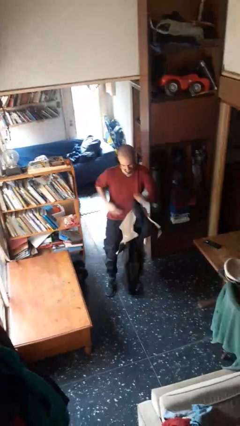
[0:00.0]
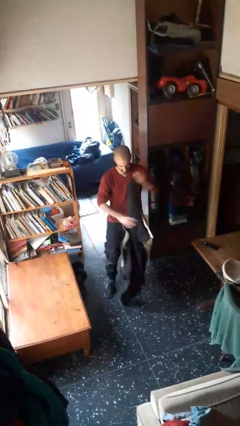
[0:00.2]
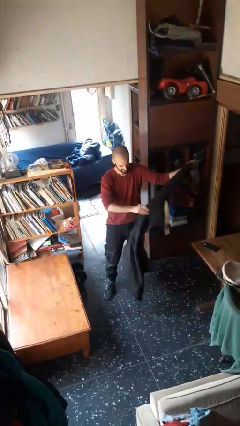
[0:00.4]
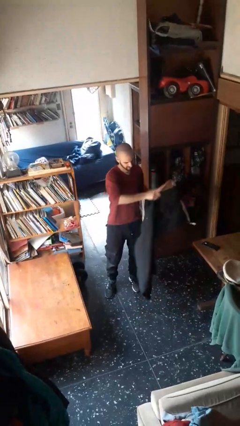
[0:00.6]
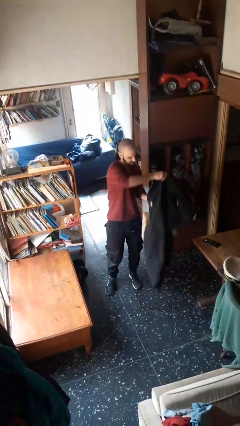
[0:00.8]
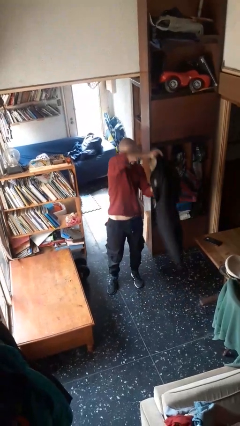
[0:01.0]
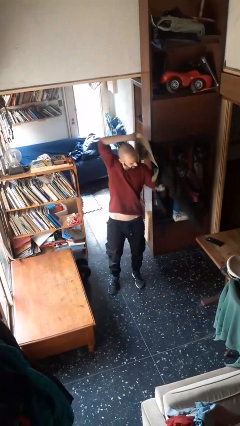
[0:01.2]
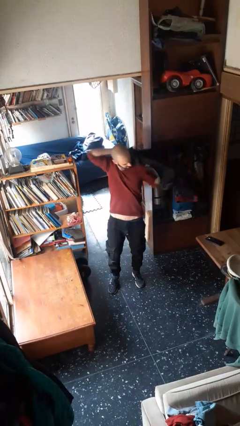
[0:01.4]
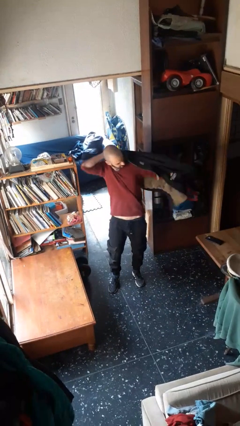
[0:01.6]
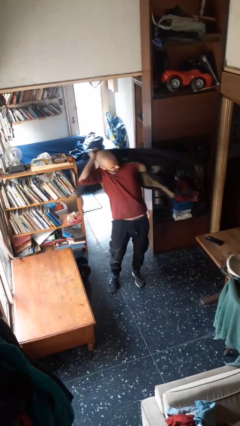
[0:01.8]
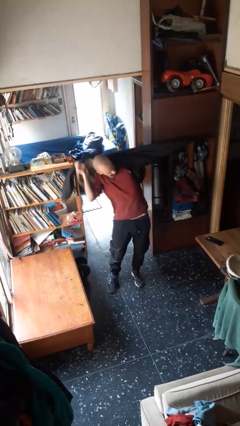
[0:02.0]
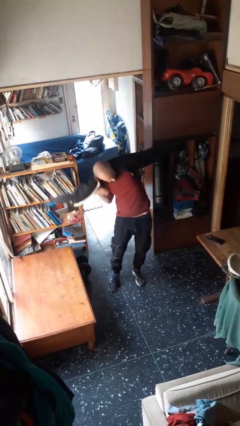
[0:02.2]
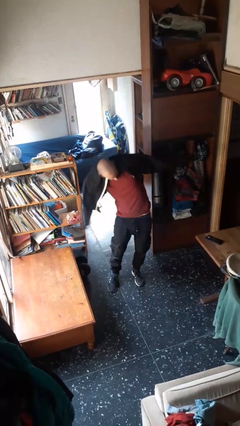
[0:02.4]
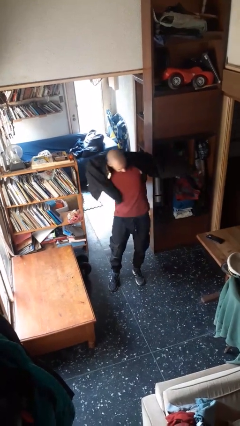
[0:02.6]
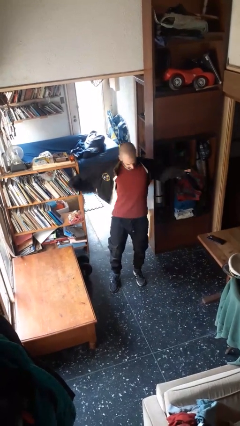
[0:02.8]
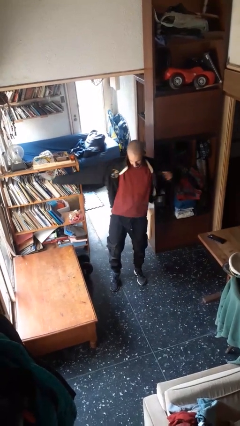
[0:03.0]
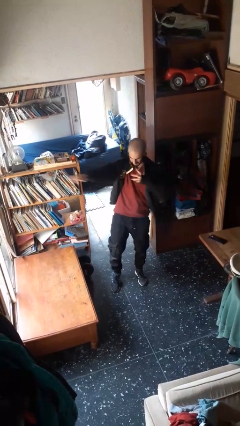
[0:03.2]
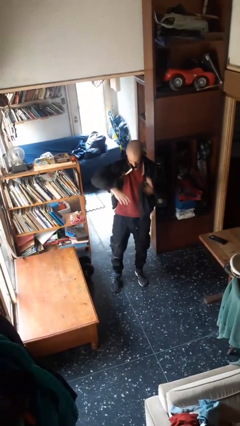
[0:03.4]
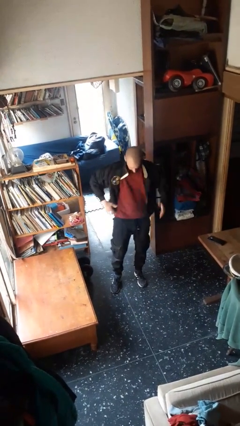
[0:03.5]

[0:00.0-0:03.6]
person puts on jacket

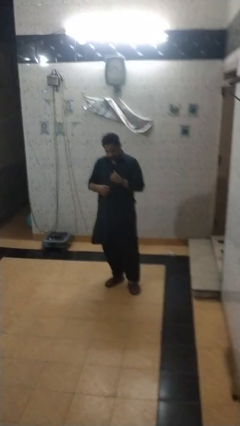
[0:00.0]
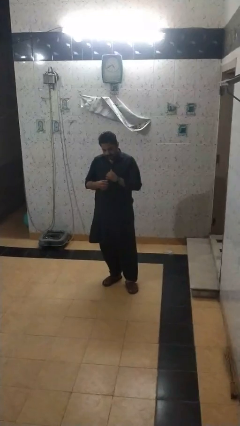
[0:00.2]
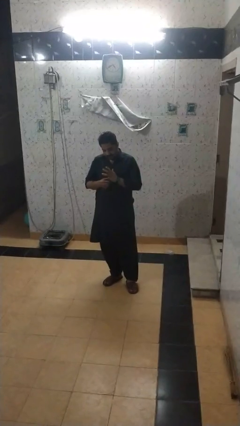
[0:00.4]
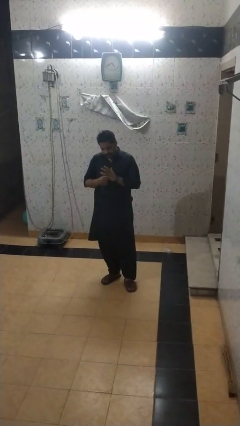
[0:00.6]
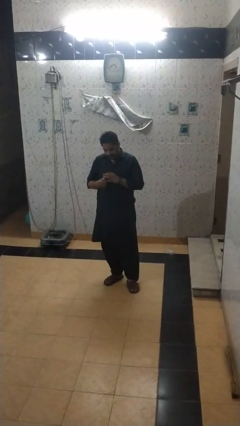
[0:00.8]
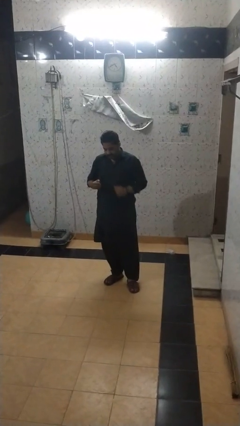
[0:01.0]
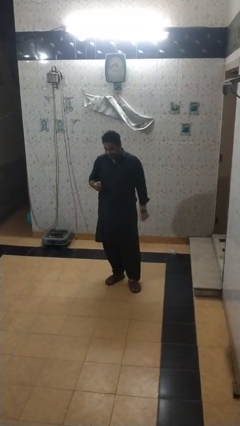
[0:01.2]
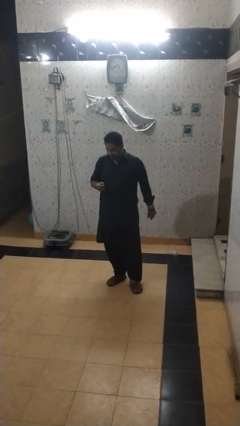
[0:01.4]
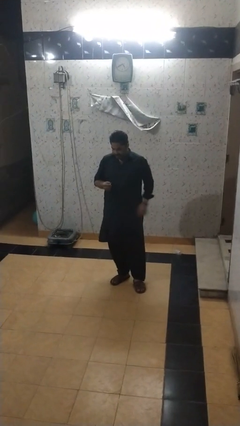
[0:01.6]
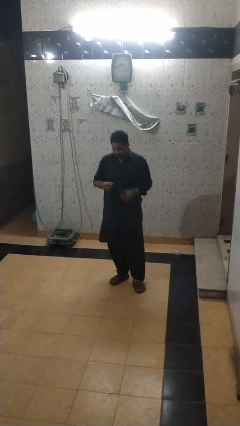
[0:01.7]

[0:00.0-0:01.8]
person takes off ring

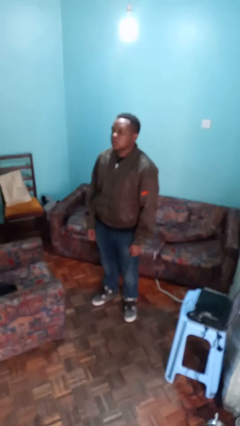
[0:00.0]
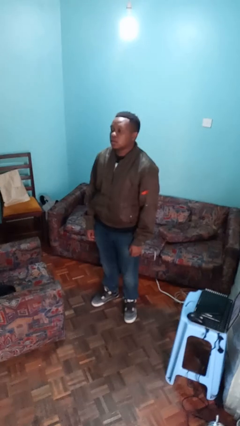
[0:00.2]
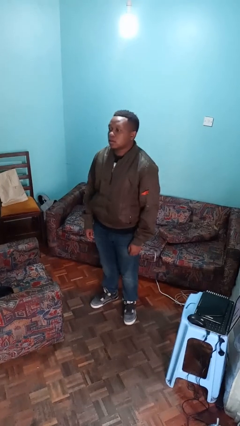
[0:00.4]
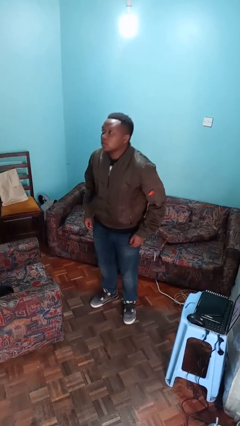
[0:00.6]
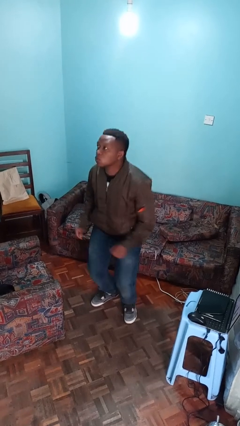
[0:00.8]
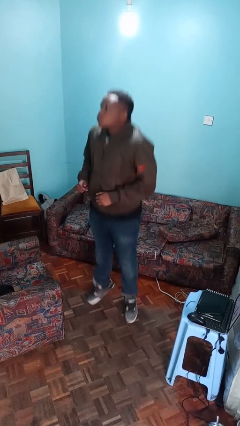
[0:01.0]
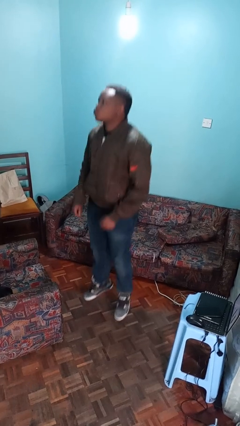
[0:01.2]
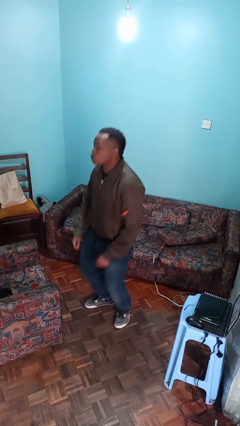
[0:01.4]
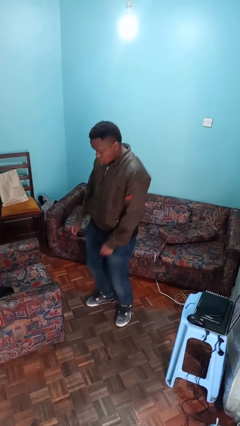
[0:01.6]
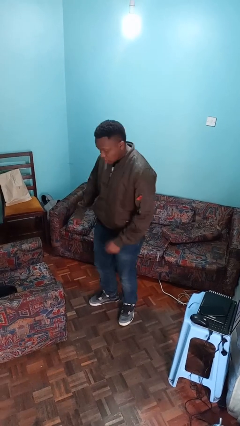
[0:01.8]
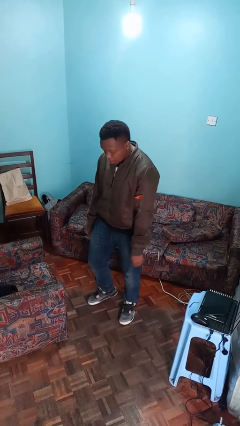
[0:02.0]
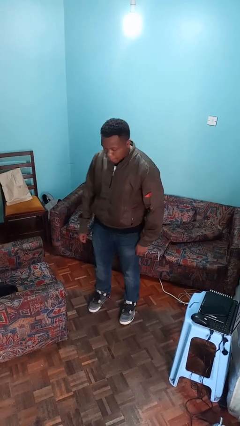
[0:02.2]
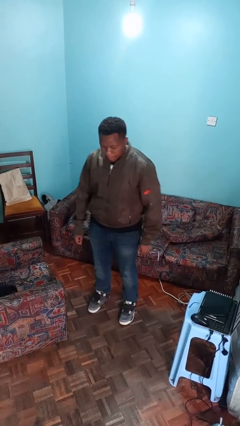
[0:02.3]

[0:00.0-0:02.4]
person jumps

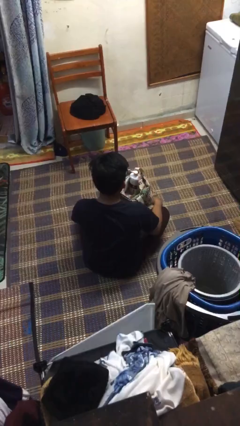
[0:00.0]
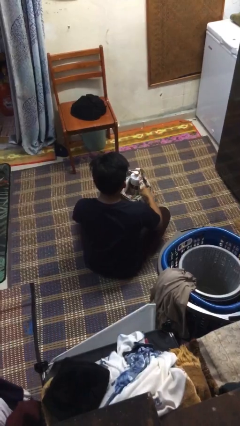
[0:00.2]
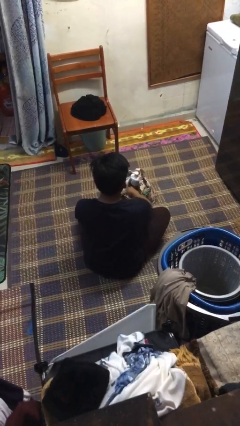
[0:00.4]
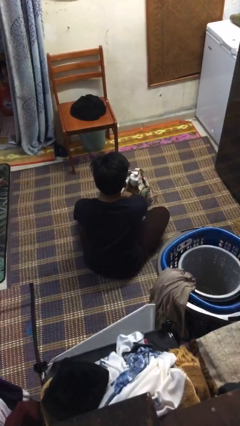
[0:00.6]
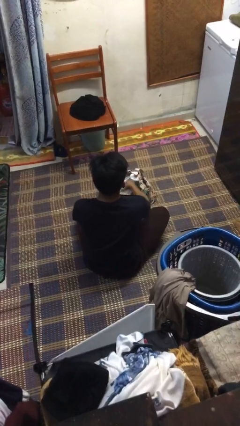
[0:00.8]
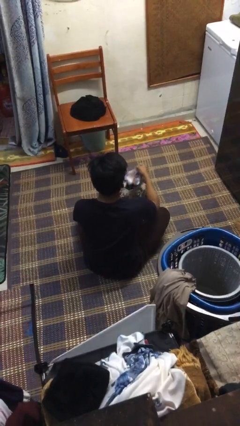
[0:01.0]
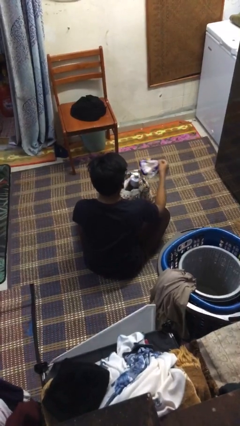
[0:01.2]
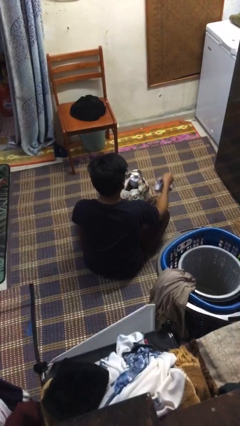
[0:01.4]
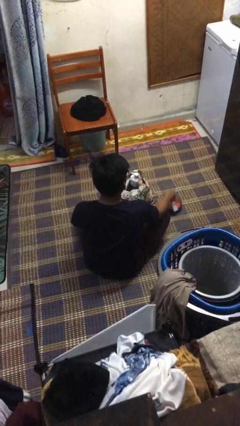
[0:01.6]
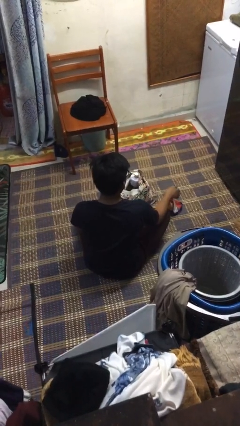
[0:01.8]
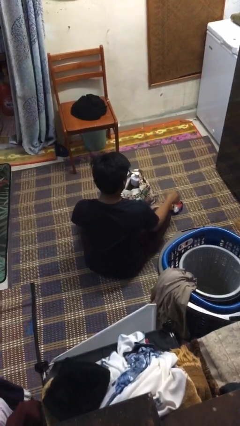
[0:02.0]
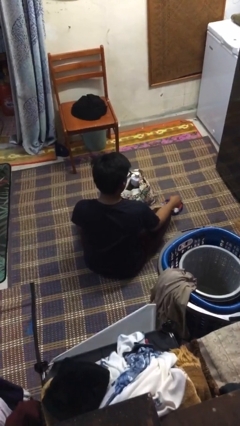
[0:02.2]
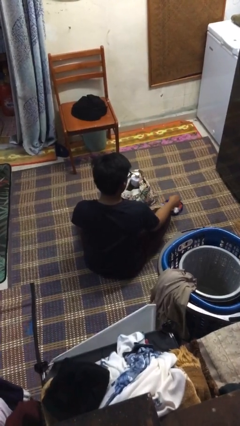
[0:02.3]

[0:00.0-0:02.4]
person takes object from bag

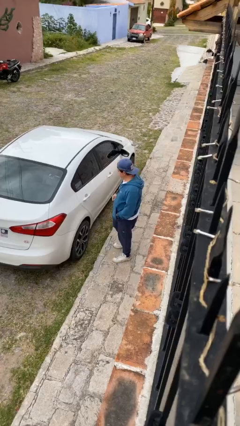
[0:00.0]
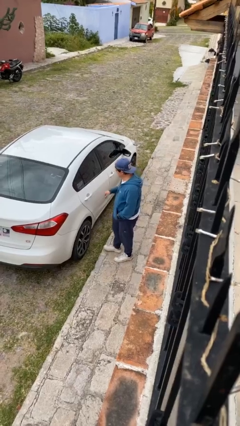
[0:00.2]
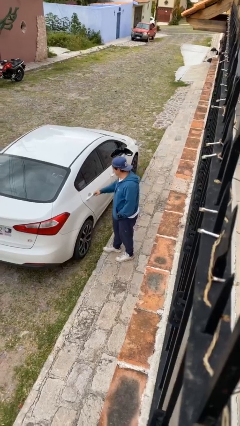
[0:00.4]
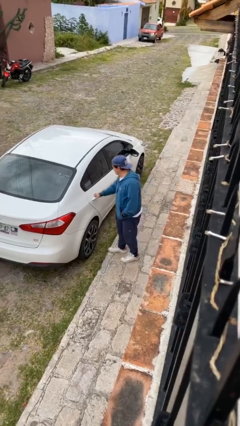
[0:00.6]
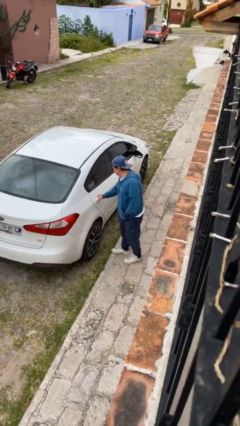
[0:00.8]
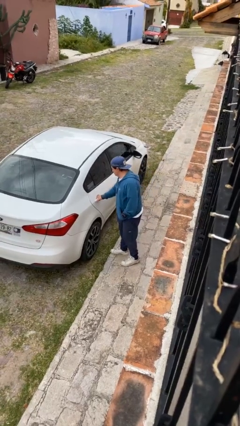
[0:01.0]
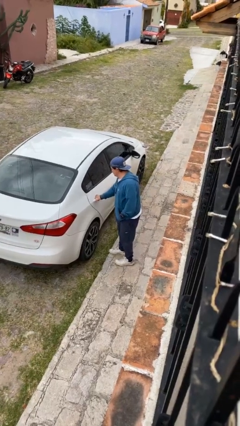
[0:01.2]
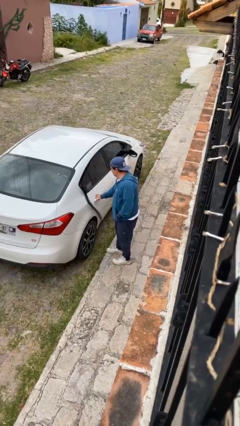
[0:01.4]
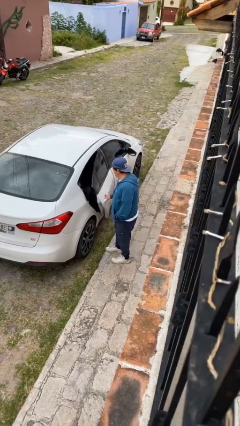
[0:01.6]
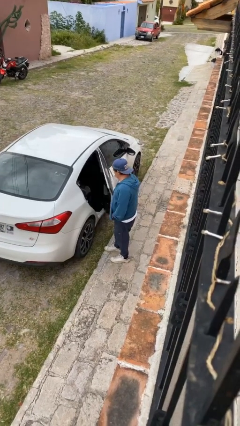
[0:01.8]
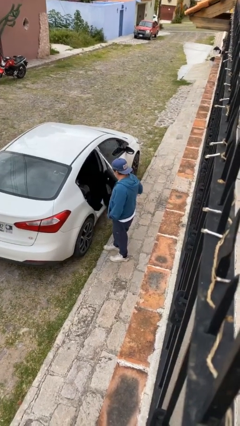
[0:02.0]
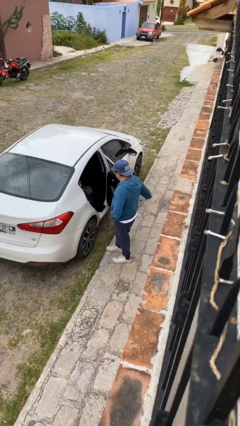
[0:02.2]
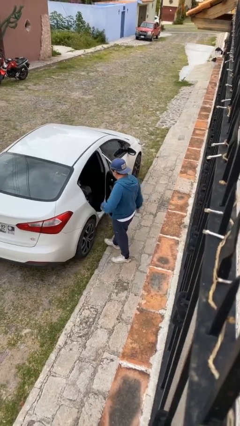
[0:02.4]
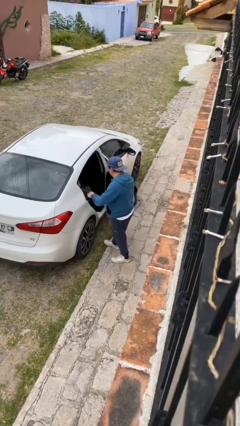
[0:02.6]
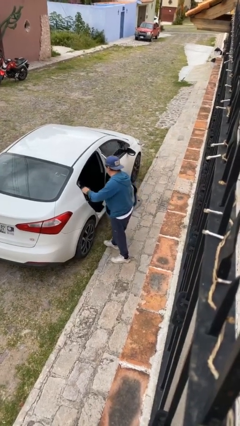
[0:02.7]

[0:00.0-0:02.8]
person opens car door

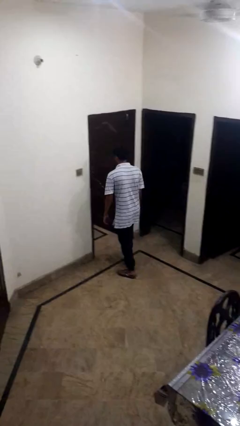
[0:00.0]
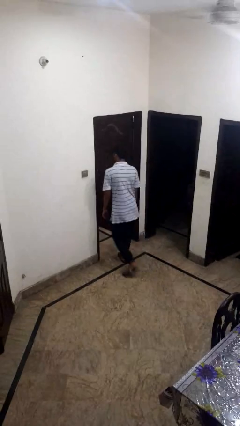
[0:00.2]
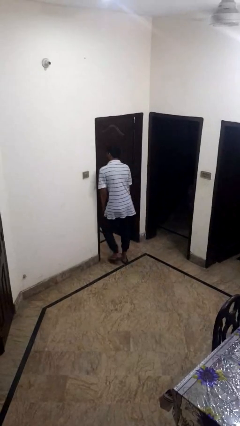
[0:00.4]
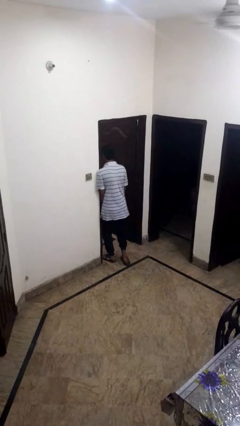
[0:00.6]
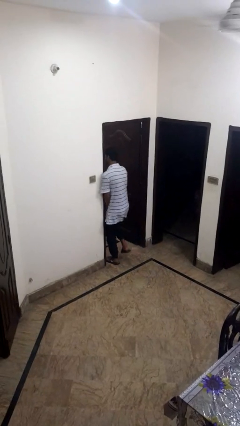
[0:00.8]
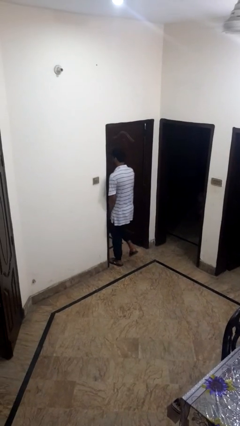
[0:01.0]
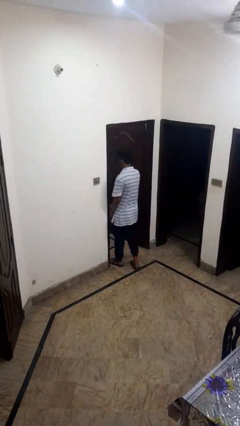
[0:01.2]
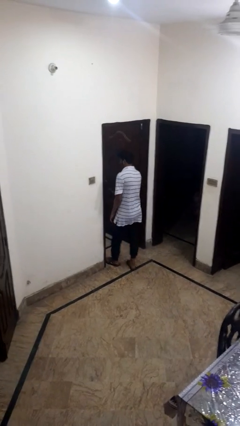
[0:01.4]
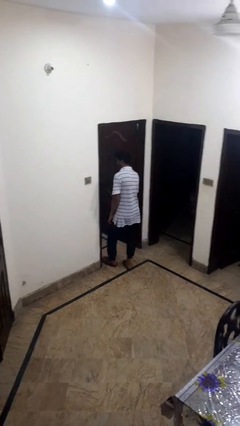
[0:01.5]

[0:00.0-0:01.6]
person bumps into wall

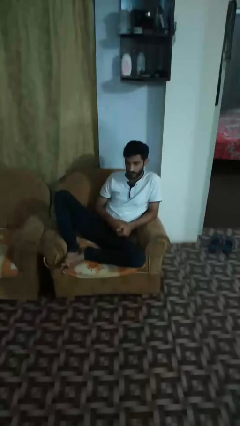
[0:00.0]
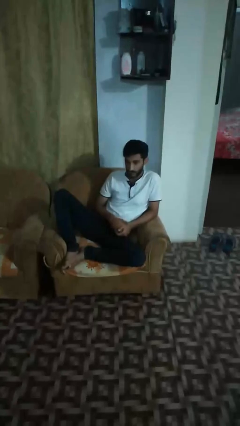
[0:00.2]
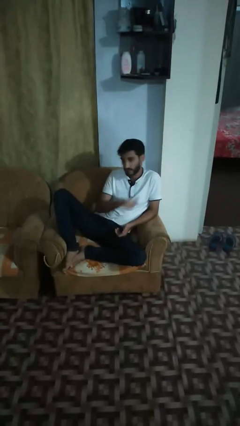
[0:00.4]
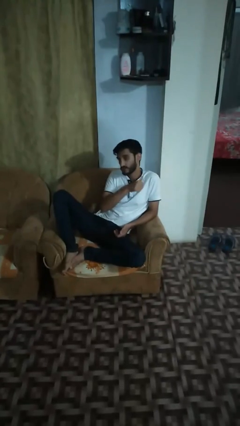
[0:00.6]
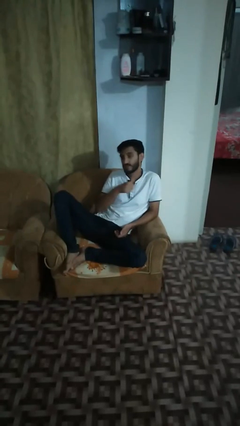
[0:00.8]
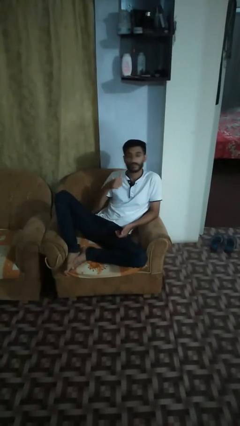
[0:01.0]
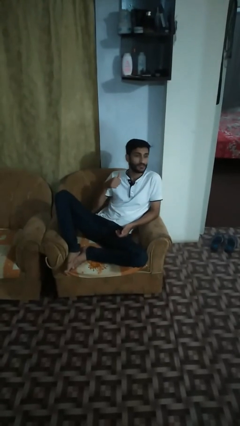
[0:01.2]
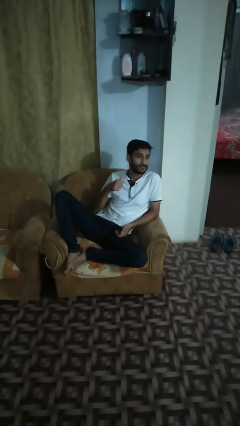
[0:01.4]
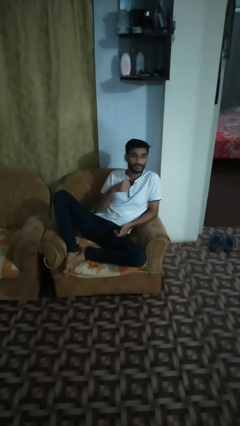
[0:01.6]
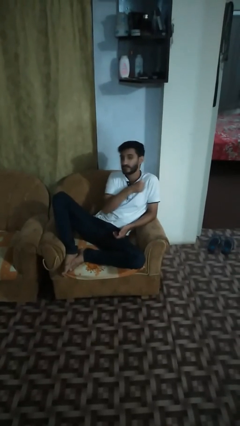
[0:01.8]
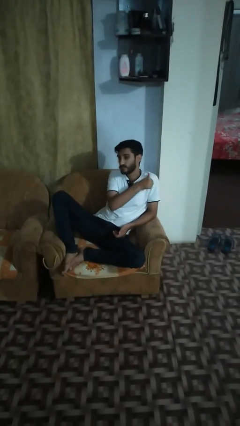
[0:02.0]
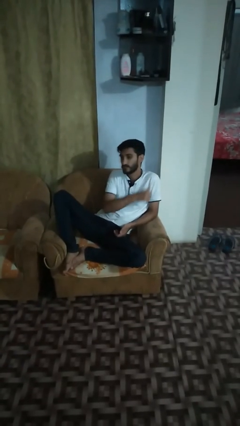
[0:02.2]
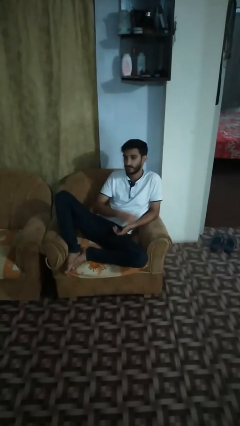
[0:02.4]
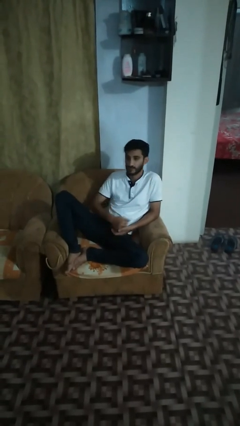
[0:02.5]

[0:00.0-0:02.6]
person gestures cut
